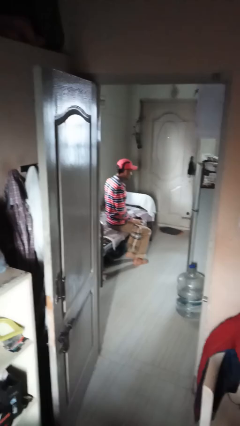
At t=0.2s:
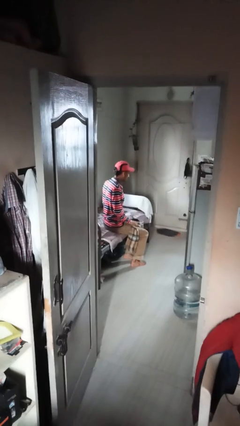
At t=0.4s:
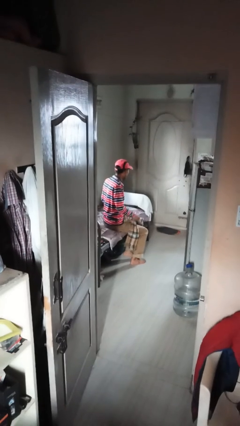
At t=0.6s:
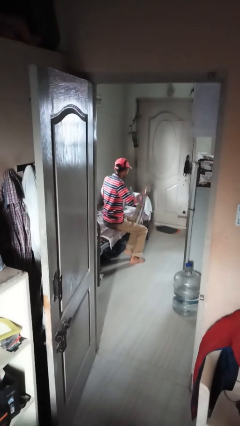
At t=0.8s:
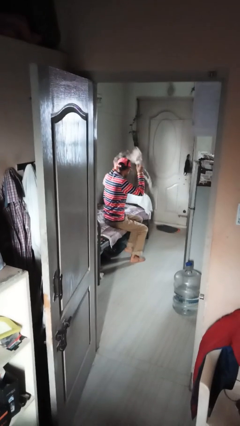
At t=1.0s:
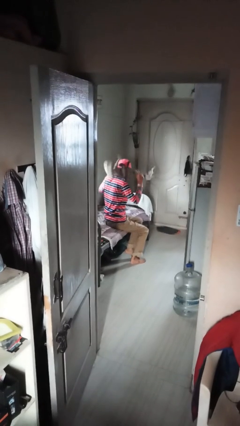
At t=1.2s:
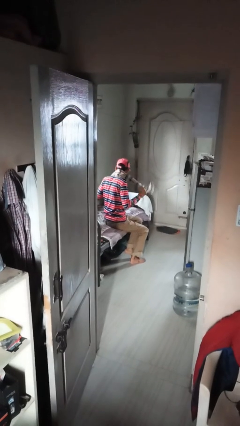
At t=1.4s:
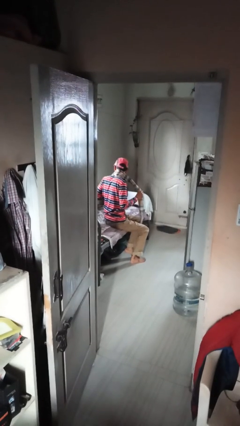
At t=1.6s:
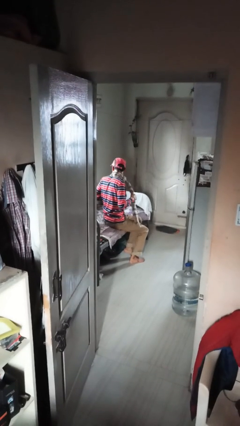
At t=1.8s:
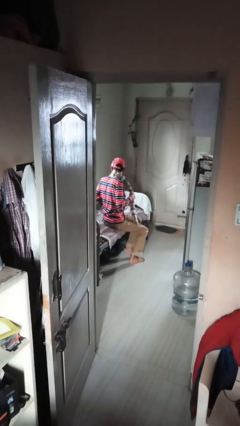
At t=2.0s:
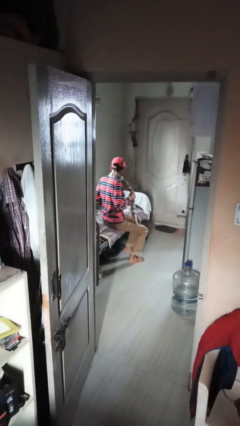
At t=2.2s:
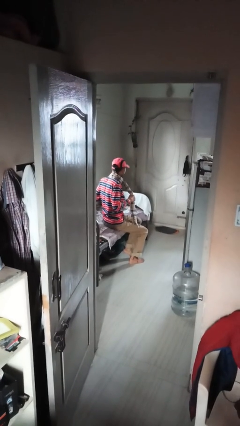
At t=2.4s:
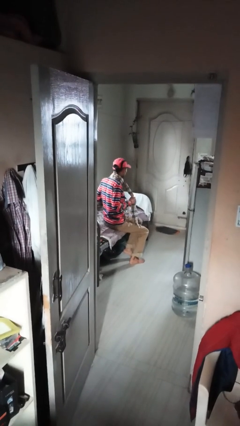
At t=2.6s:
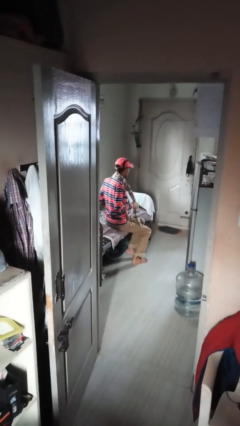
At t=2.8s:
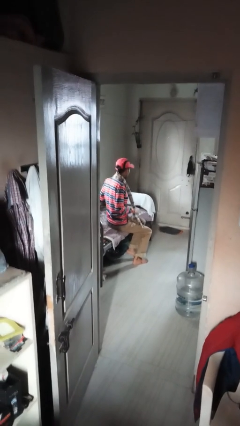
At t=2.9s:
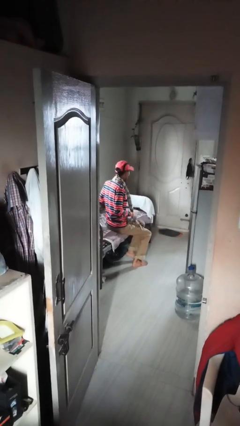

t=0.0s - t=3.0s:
person puts on scarf

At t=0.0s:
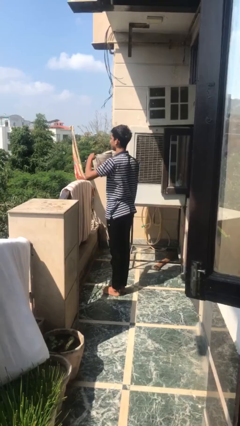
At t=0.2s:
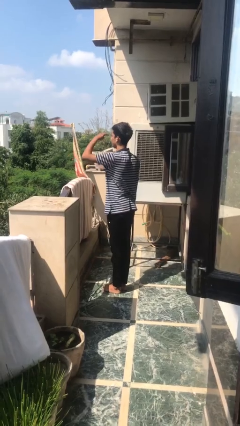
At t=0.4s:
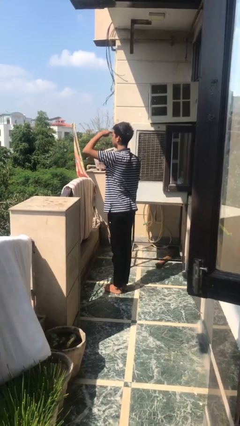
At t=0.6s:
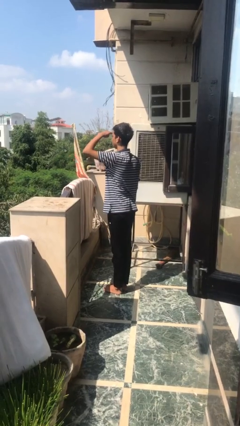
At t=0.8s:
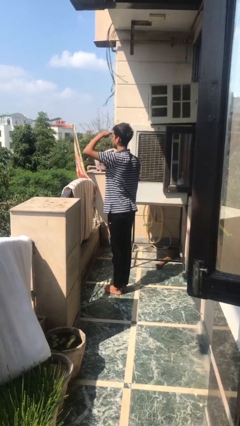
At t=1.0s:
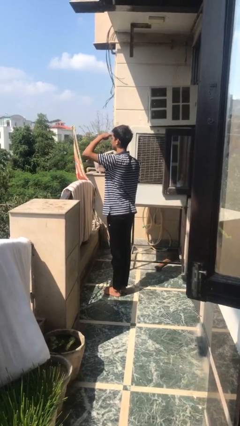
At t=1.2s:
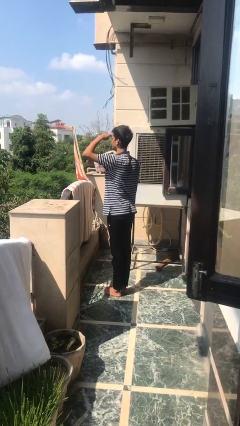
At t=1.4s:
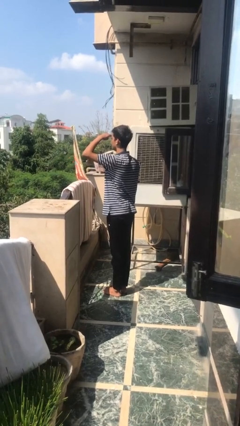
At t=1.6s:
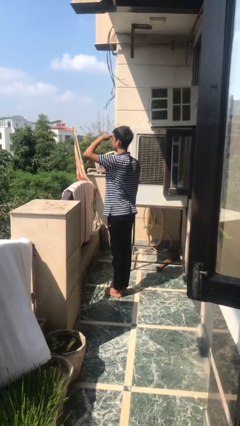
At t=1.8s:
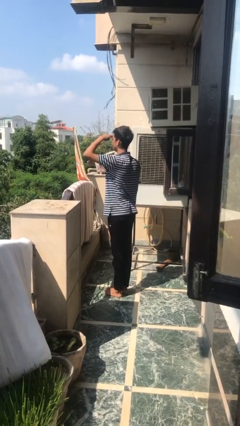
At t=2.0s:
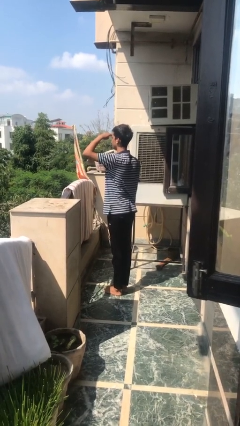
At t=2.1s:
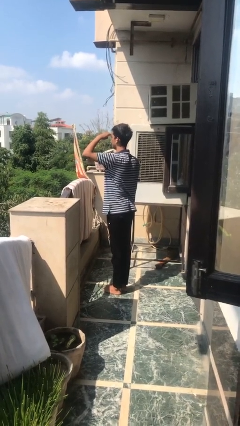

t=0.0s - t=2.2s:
person shades eyes

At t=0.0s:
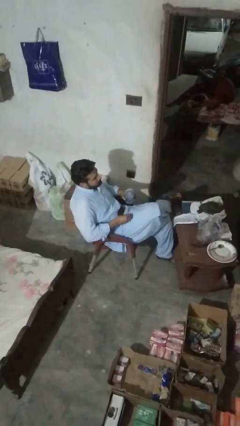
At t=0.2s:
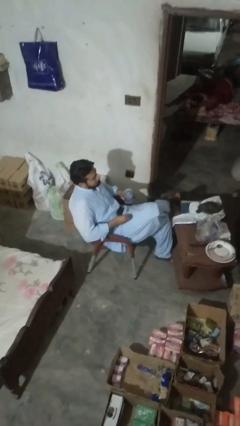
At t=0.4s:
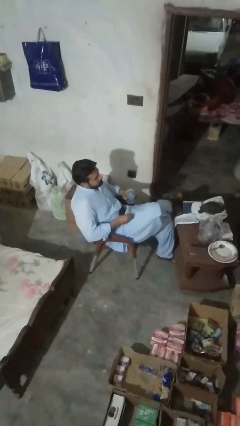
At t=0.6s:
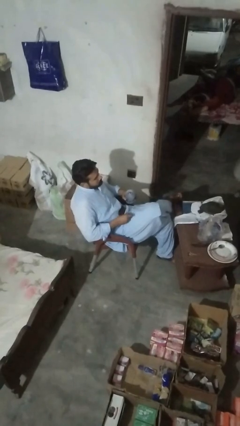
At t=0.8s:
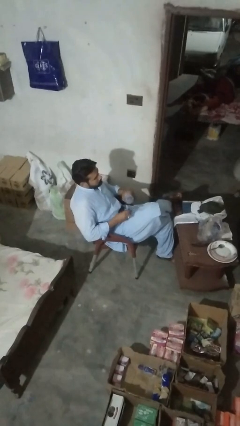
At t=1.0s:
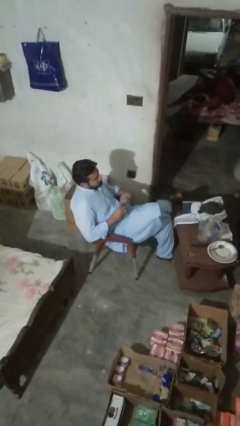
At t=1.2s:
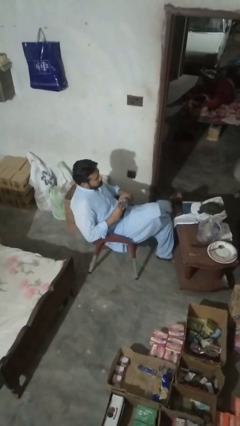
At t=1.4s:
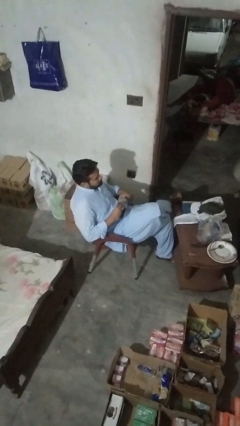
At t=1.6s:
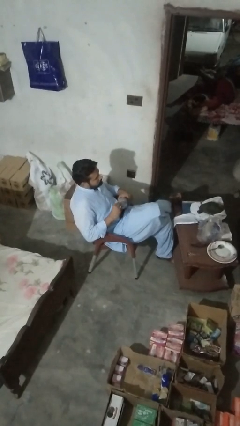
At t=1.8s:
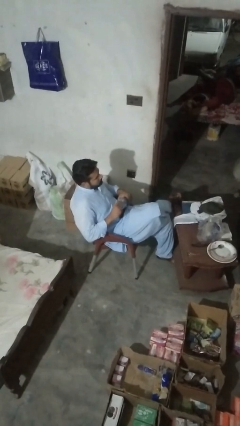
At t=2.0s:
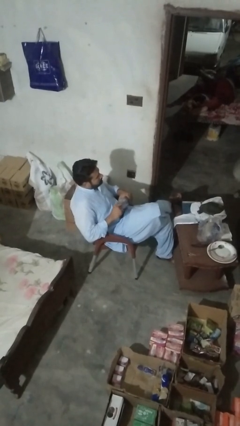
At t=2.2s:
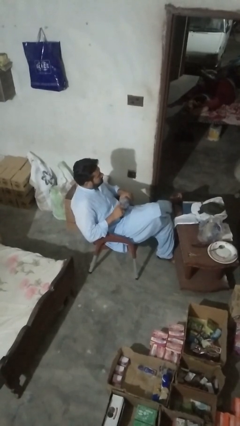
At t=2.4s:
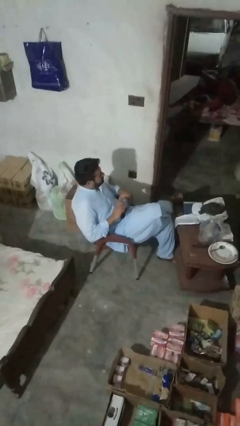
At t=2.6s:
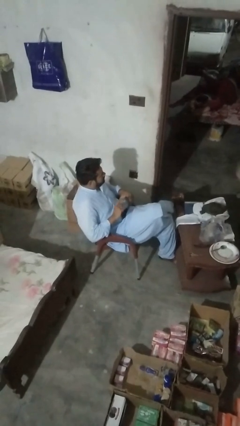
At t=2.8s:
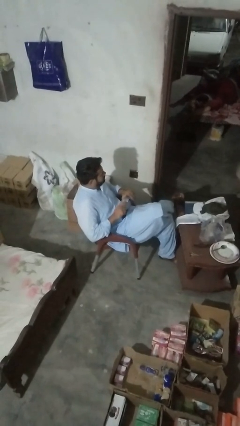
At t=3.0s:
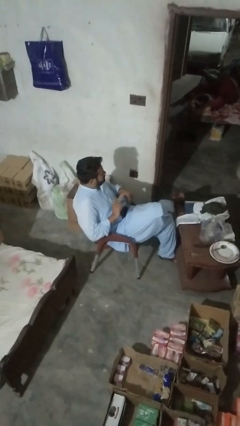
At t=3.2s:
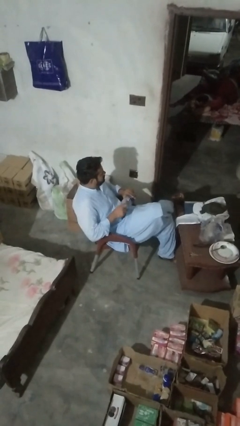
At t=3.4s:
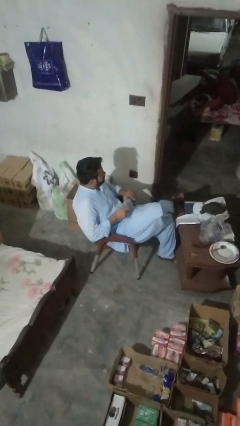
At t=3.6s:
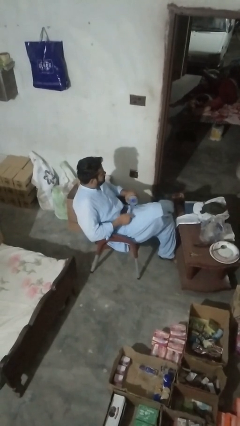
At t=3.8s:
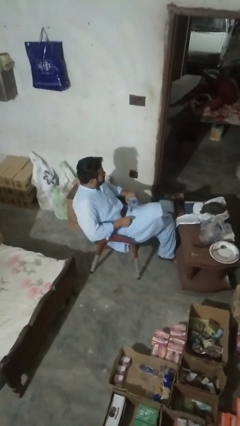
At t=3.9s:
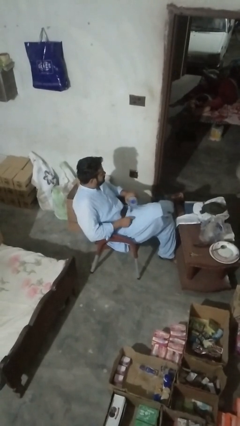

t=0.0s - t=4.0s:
person screws lid to bottle

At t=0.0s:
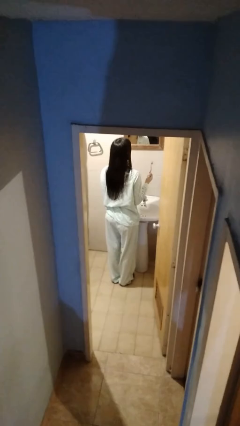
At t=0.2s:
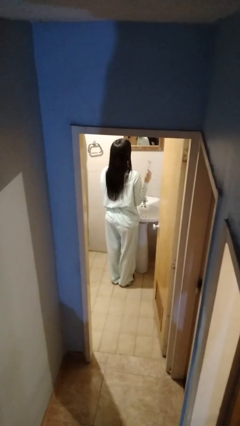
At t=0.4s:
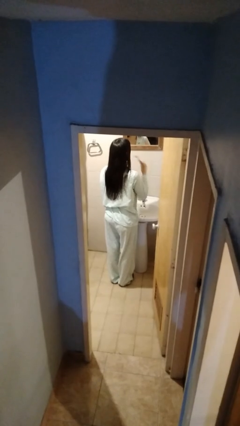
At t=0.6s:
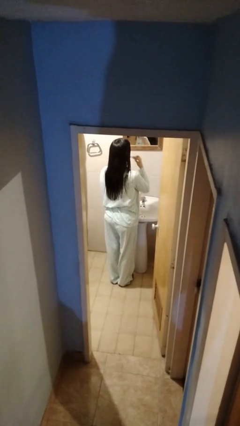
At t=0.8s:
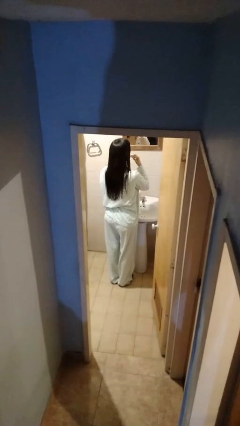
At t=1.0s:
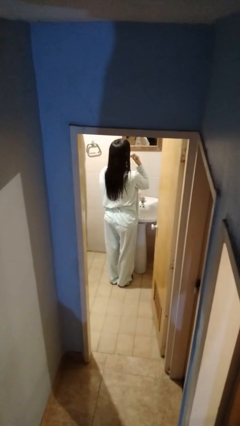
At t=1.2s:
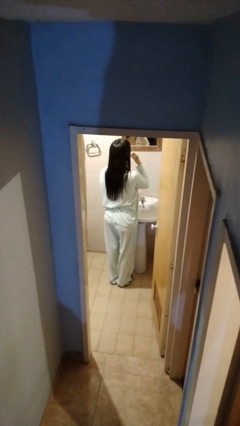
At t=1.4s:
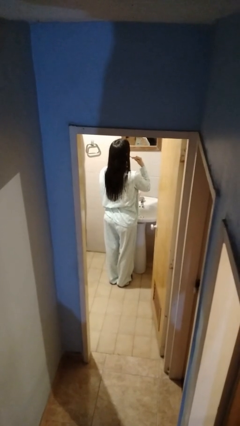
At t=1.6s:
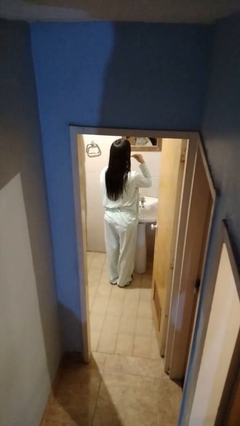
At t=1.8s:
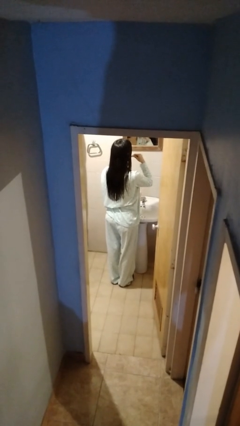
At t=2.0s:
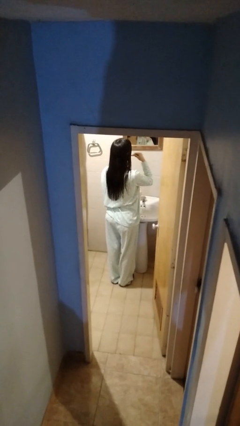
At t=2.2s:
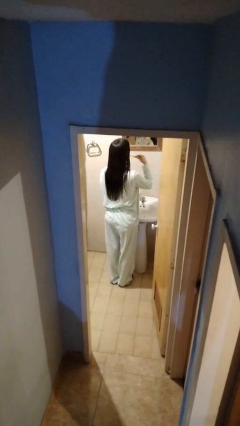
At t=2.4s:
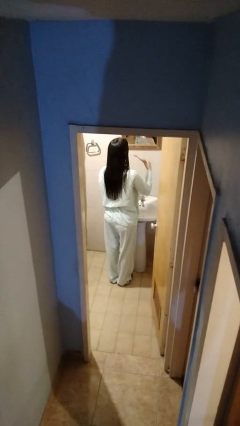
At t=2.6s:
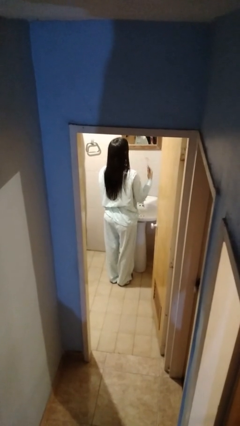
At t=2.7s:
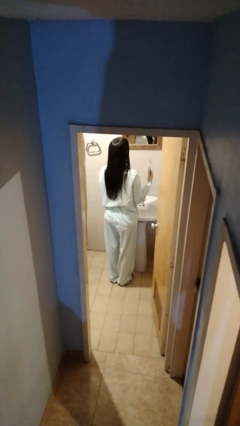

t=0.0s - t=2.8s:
person brushes teeth

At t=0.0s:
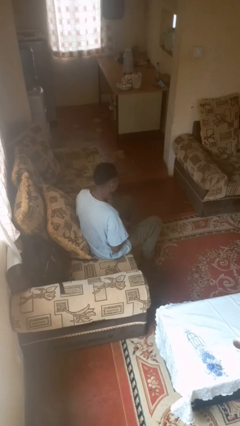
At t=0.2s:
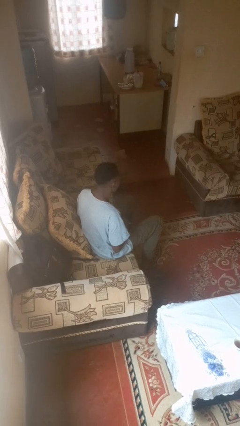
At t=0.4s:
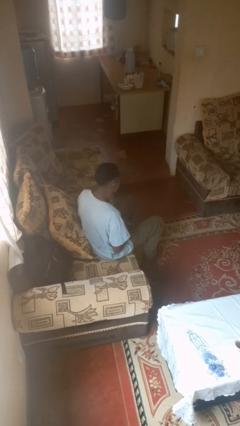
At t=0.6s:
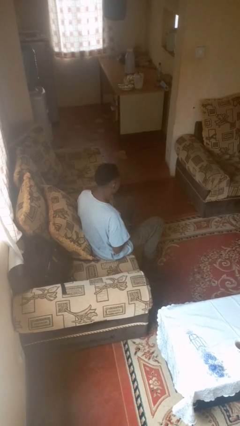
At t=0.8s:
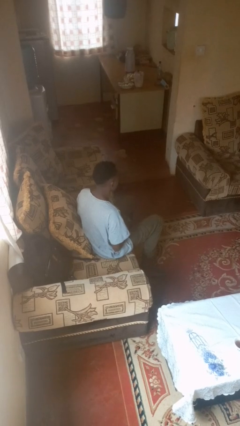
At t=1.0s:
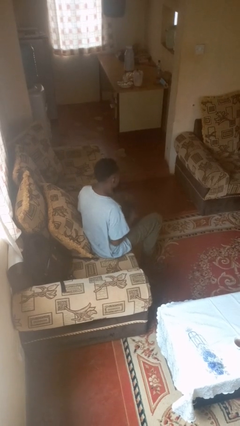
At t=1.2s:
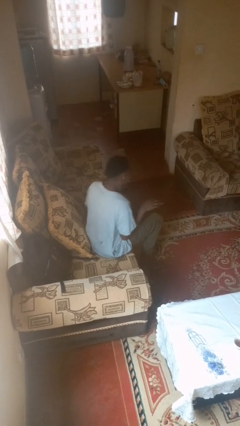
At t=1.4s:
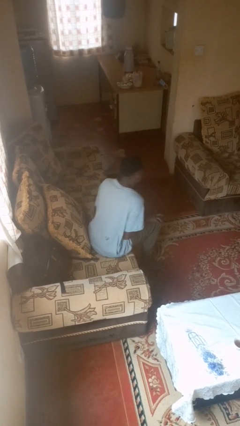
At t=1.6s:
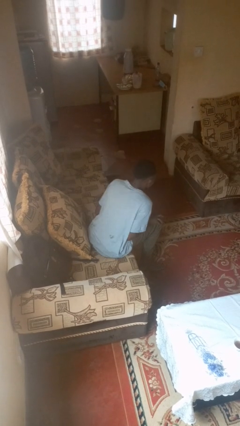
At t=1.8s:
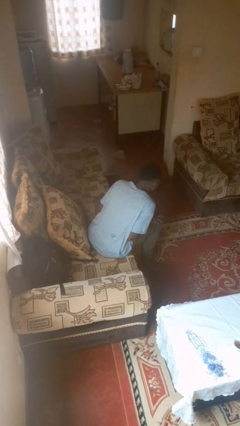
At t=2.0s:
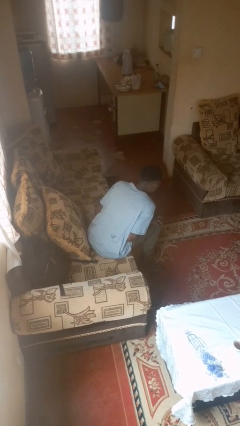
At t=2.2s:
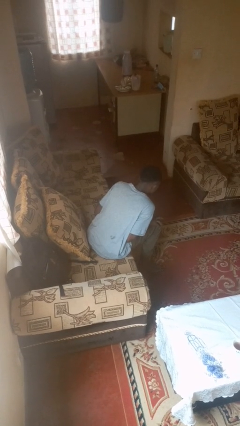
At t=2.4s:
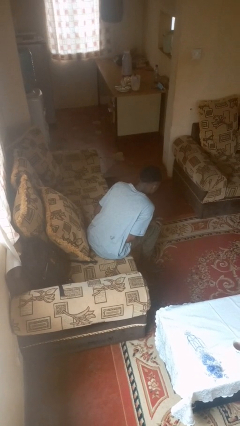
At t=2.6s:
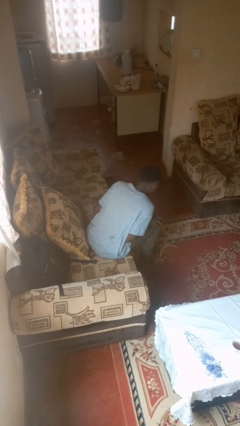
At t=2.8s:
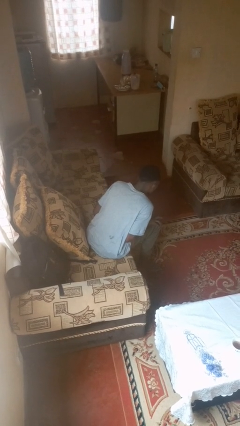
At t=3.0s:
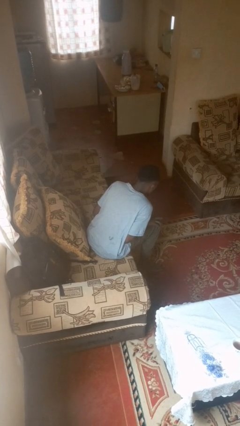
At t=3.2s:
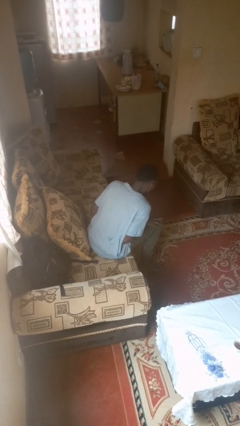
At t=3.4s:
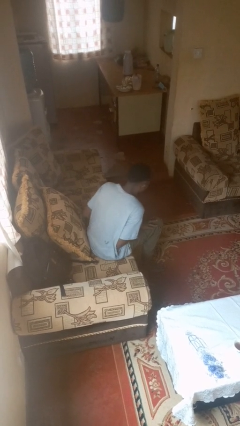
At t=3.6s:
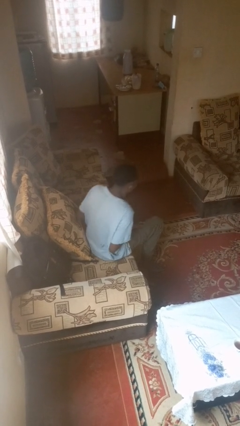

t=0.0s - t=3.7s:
person slaps hands on thighs

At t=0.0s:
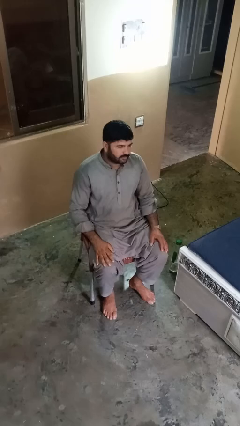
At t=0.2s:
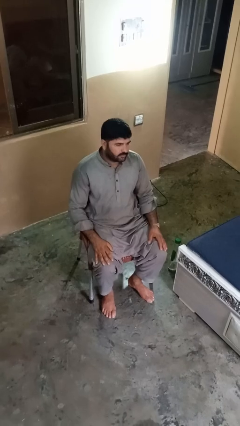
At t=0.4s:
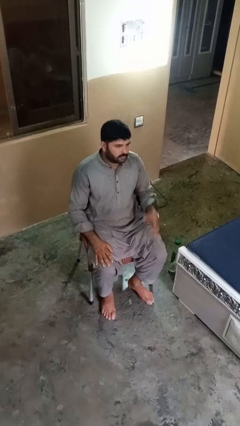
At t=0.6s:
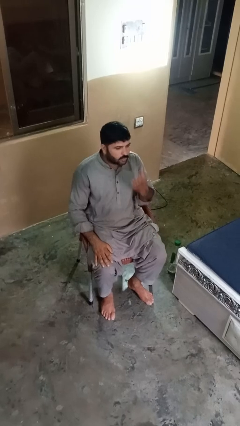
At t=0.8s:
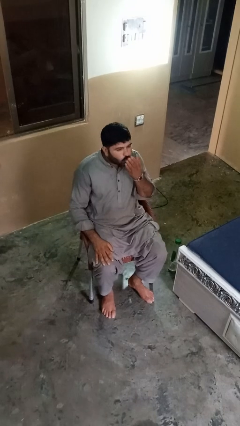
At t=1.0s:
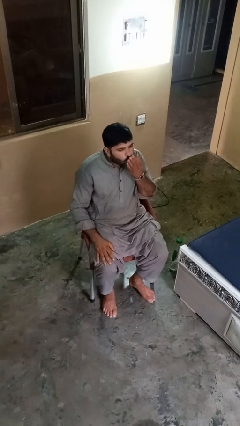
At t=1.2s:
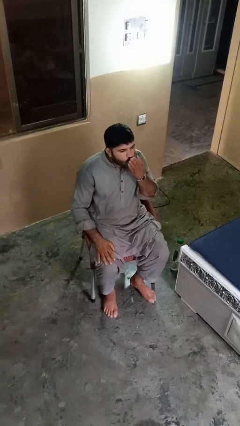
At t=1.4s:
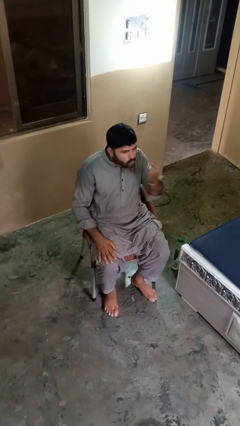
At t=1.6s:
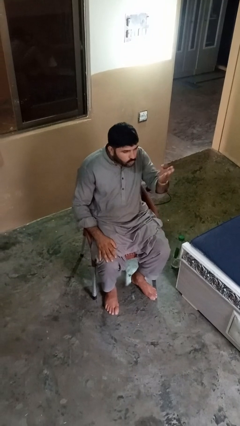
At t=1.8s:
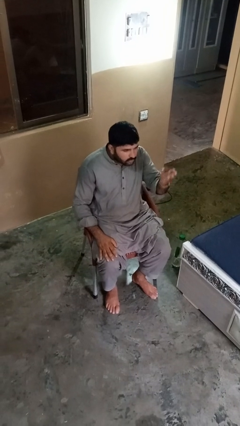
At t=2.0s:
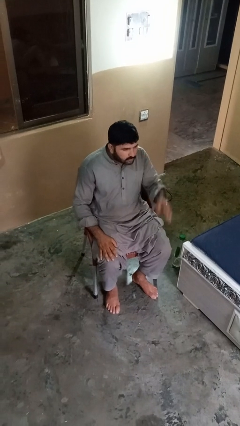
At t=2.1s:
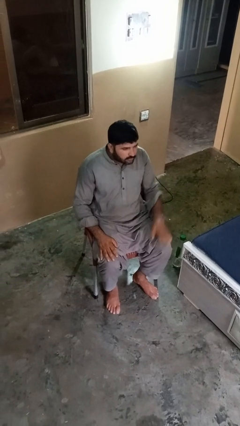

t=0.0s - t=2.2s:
person gestures blow kiss
